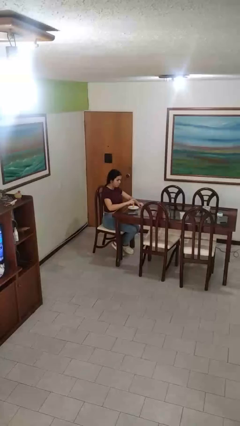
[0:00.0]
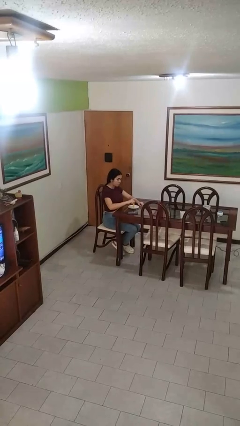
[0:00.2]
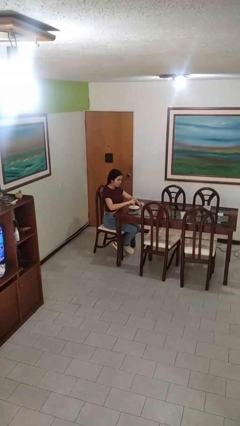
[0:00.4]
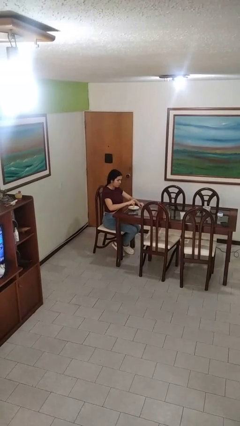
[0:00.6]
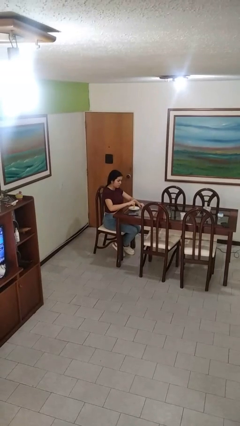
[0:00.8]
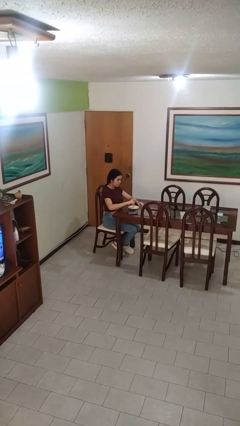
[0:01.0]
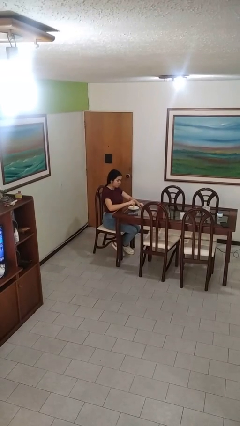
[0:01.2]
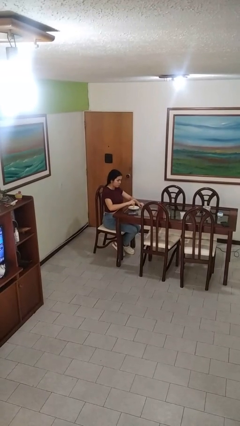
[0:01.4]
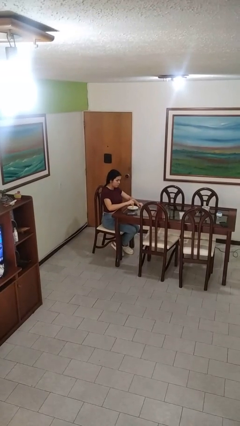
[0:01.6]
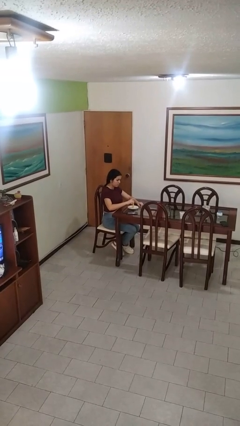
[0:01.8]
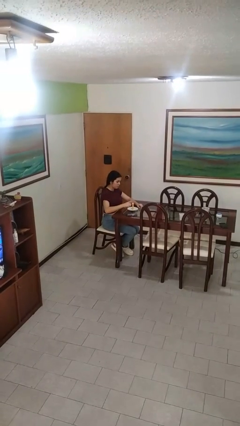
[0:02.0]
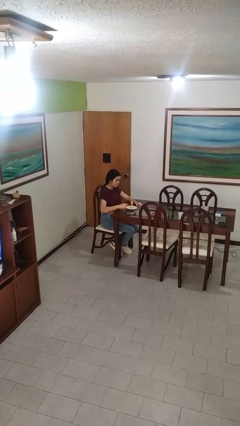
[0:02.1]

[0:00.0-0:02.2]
person lights candle

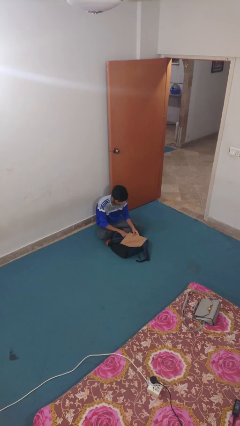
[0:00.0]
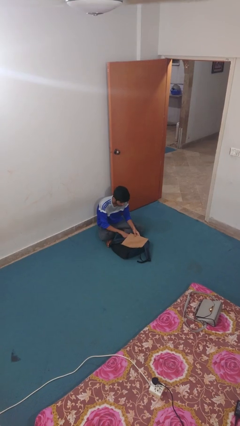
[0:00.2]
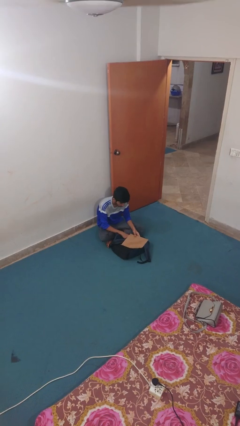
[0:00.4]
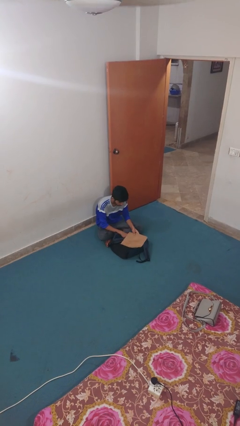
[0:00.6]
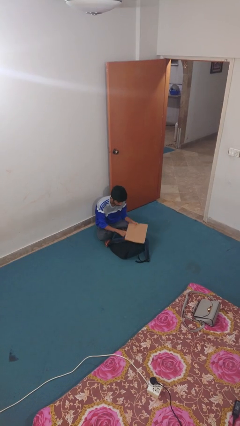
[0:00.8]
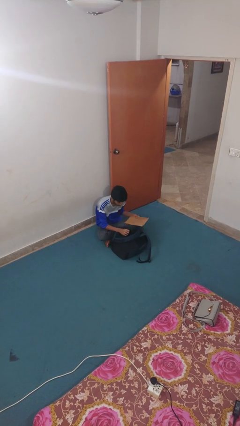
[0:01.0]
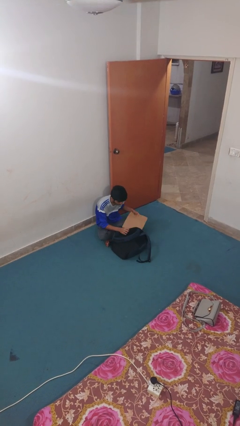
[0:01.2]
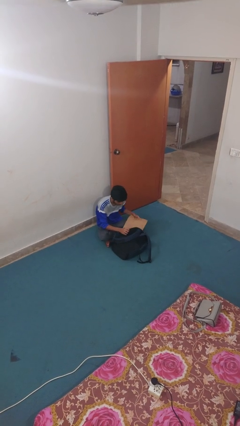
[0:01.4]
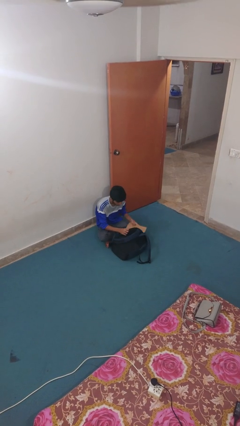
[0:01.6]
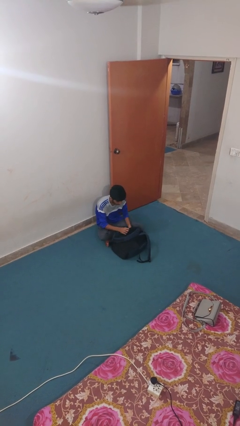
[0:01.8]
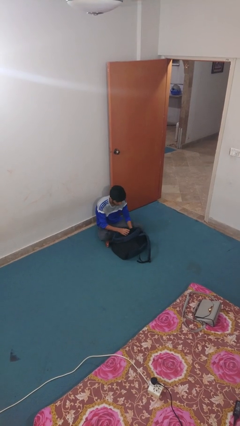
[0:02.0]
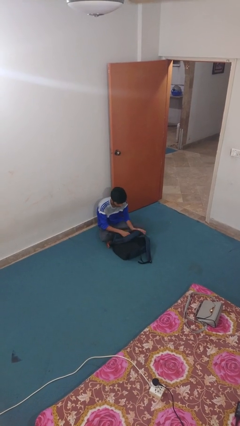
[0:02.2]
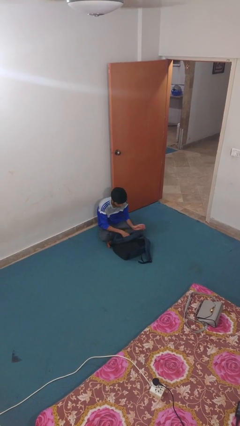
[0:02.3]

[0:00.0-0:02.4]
person puts object into backpack

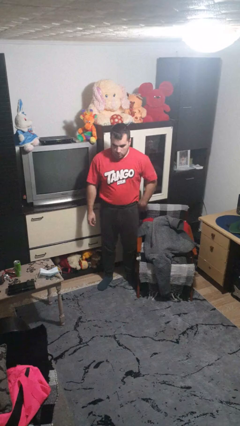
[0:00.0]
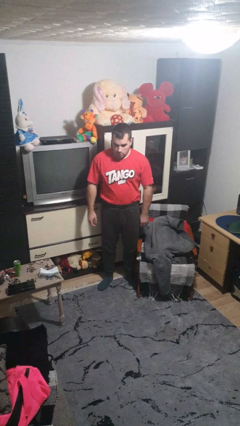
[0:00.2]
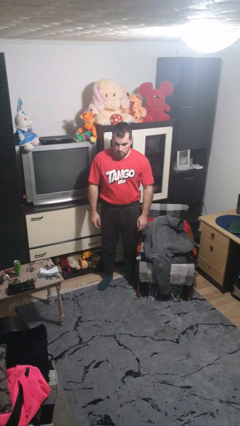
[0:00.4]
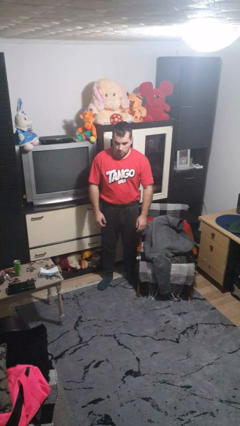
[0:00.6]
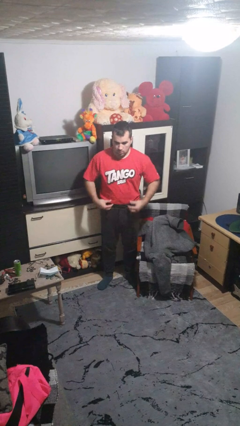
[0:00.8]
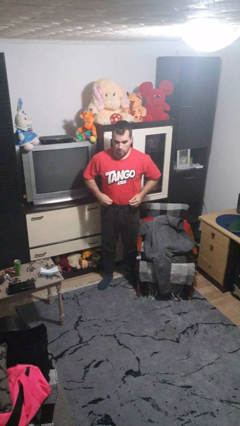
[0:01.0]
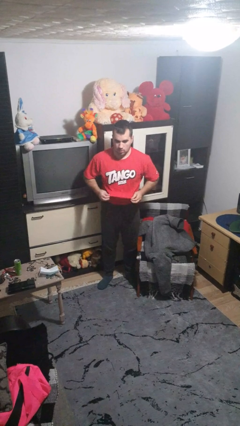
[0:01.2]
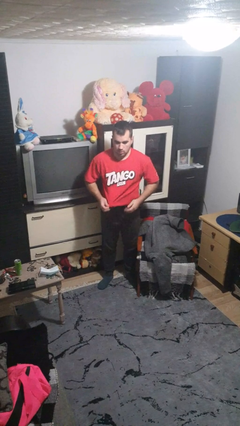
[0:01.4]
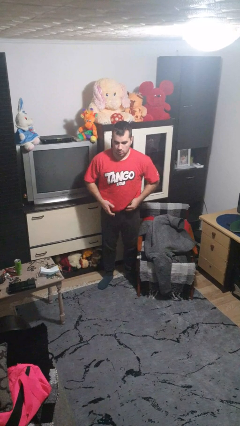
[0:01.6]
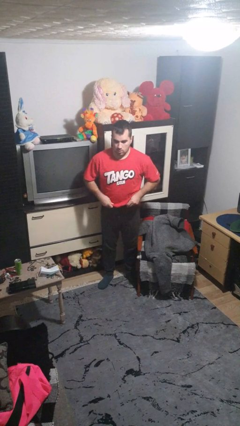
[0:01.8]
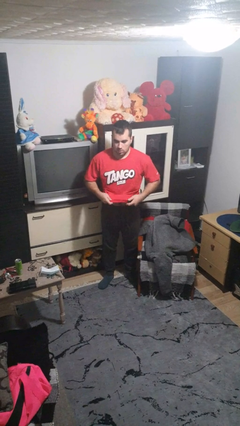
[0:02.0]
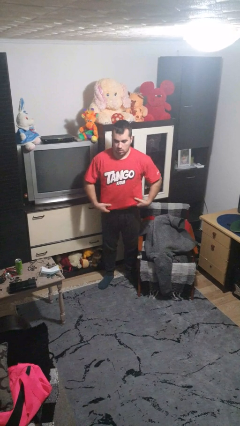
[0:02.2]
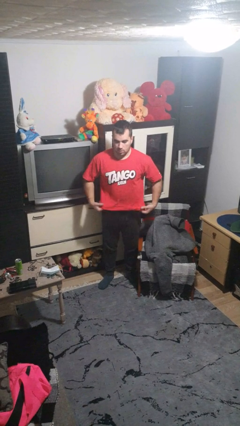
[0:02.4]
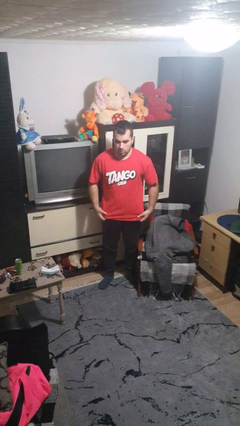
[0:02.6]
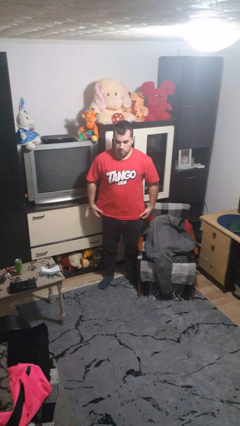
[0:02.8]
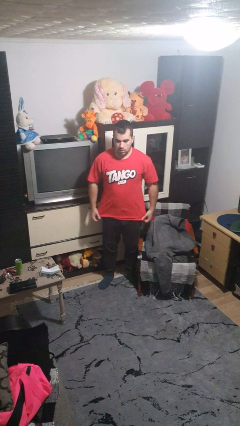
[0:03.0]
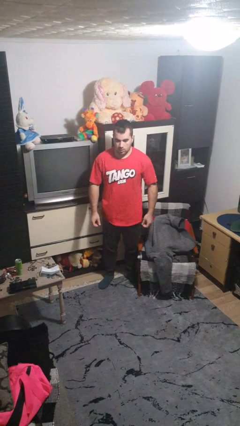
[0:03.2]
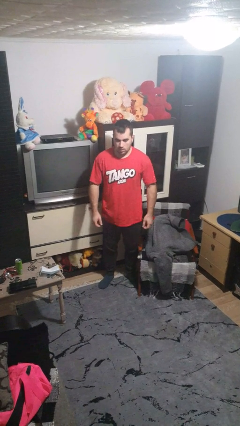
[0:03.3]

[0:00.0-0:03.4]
person untucks shirt

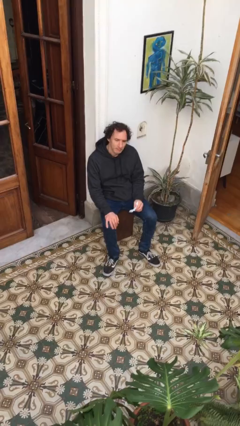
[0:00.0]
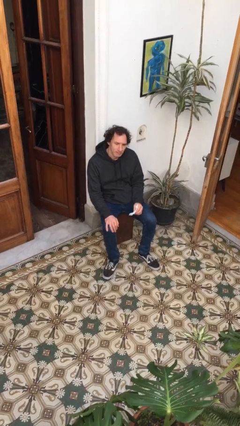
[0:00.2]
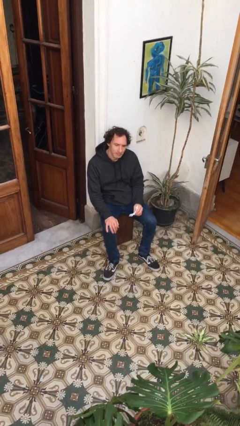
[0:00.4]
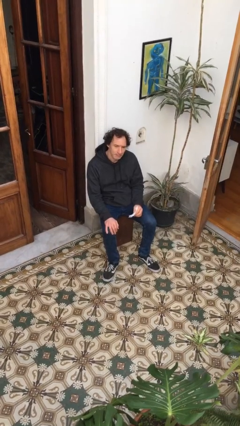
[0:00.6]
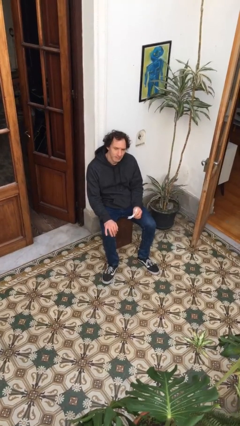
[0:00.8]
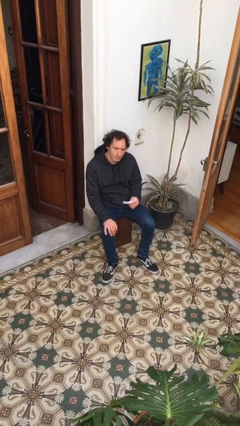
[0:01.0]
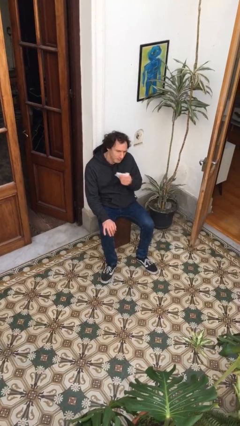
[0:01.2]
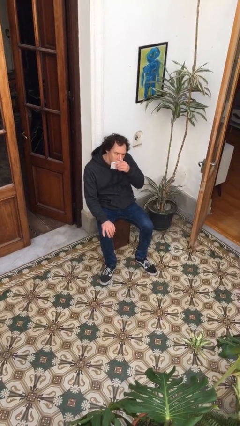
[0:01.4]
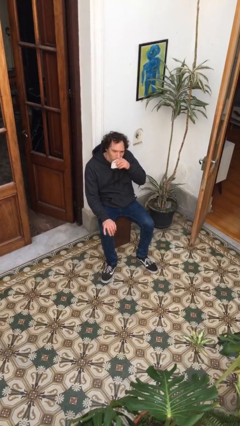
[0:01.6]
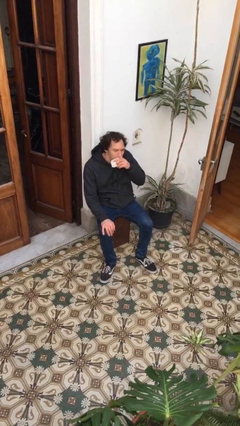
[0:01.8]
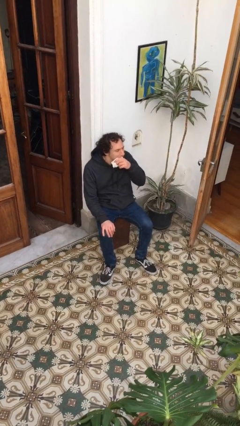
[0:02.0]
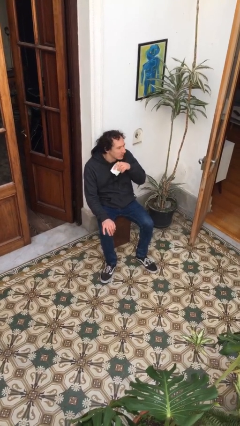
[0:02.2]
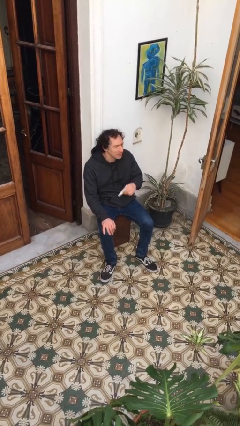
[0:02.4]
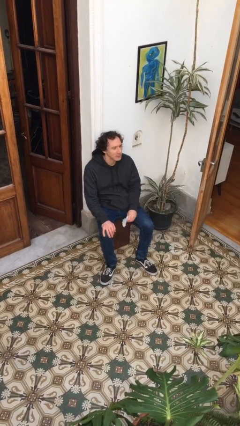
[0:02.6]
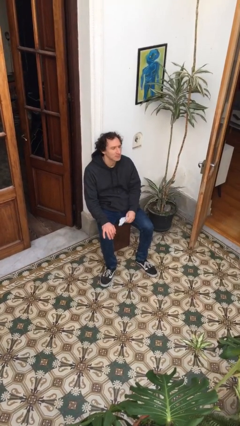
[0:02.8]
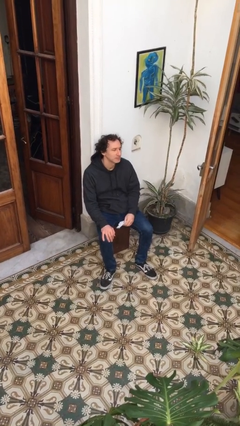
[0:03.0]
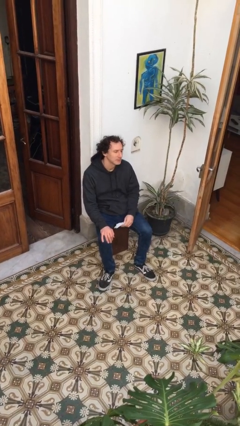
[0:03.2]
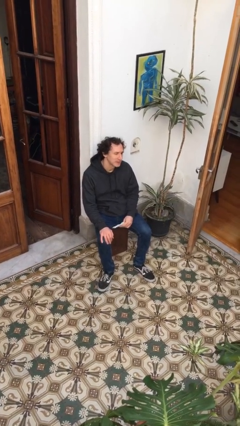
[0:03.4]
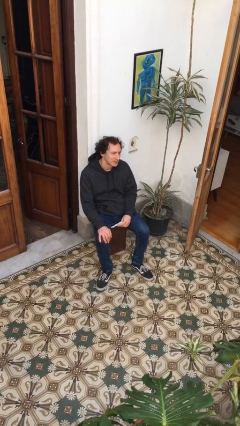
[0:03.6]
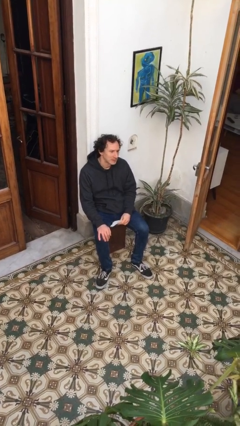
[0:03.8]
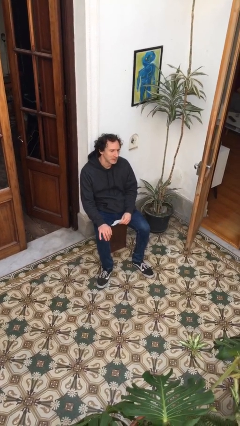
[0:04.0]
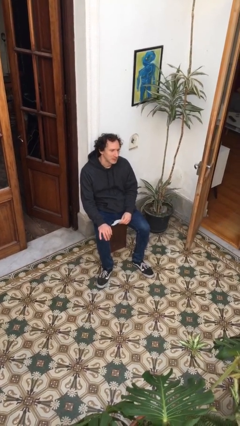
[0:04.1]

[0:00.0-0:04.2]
person wipes mouth with napkin

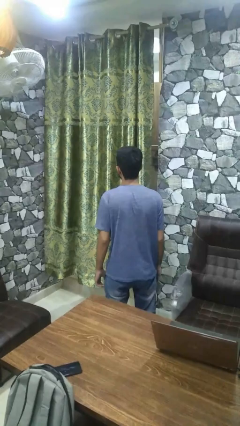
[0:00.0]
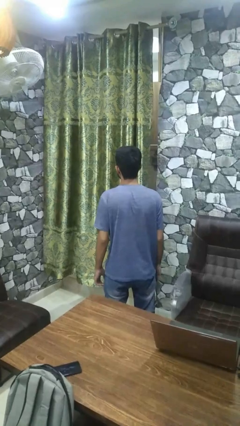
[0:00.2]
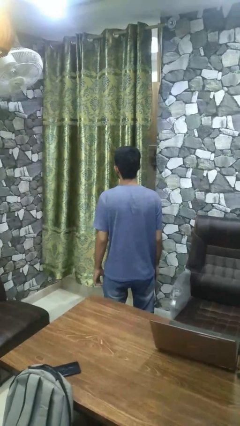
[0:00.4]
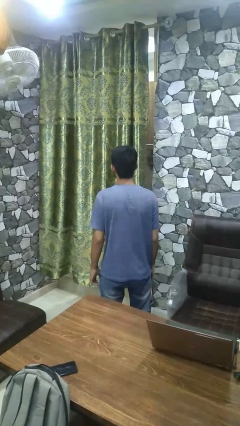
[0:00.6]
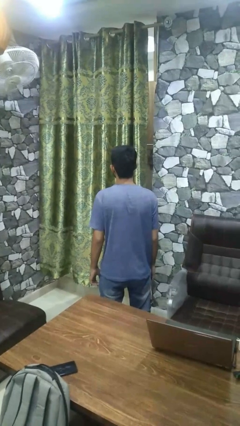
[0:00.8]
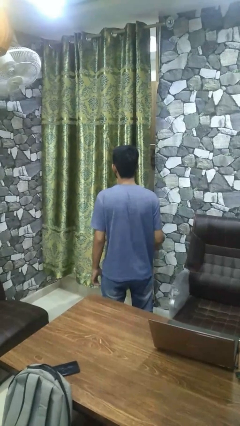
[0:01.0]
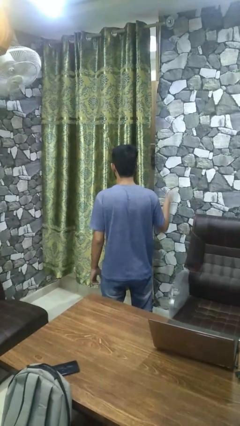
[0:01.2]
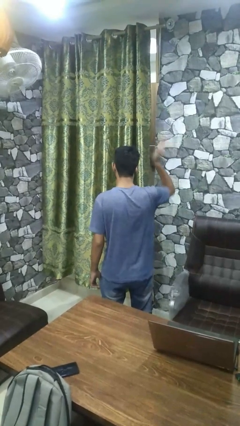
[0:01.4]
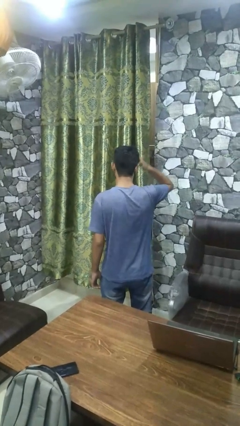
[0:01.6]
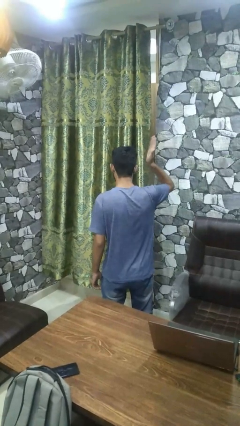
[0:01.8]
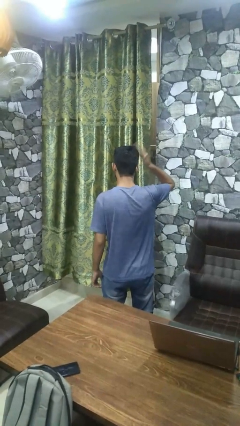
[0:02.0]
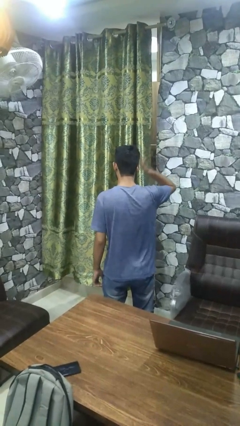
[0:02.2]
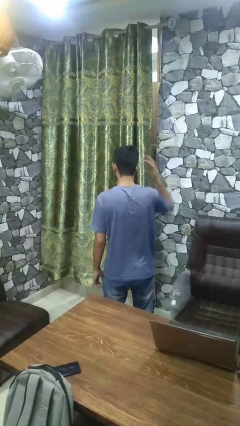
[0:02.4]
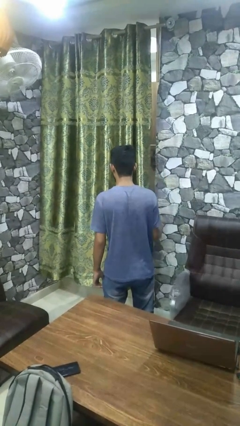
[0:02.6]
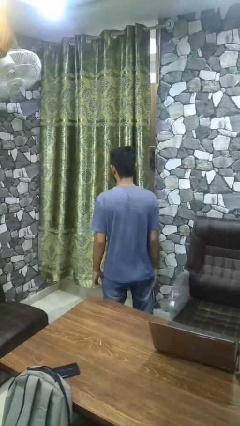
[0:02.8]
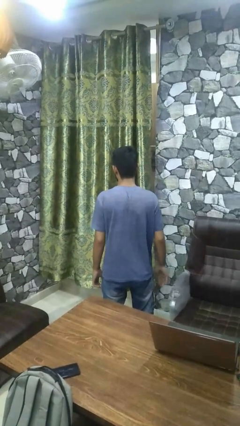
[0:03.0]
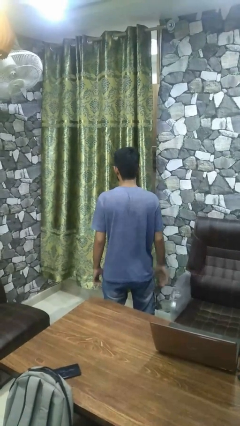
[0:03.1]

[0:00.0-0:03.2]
person pats head

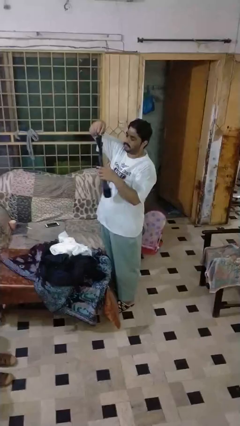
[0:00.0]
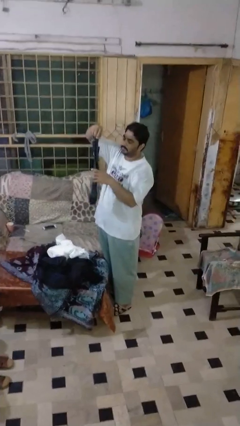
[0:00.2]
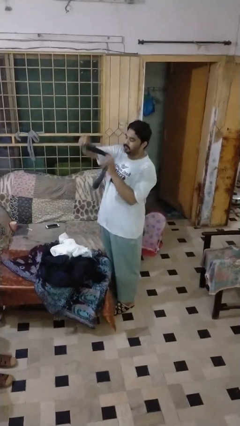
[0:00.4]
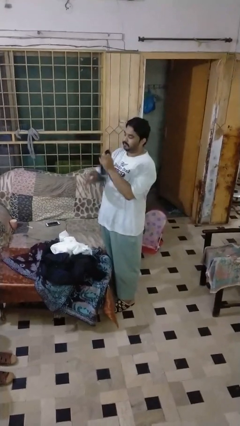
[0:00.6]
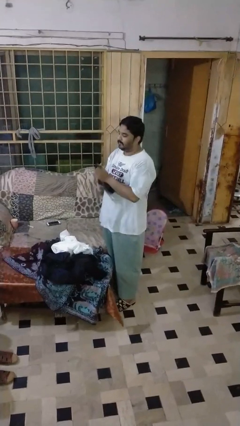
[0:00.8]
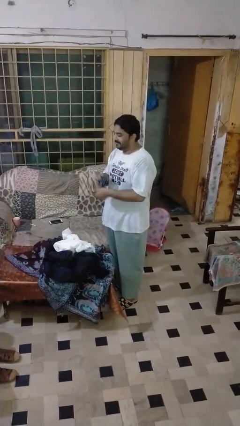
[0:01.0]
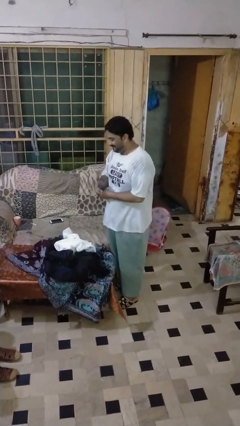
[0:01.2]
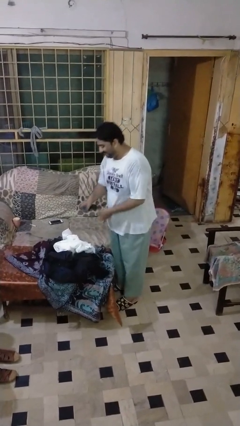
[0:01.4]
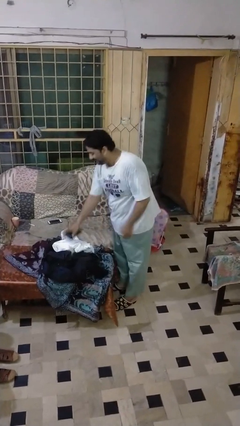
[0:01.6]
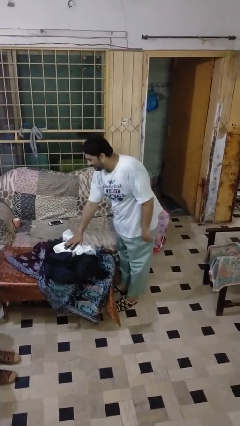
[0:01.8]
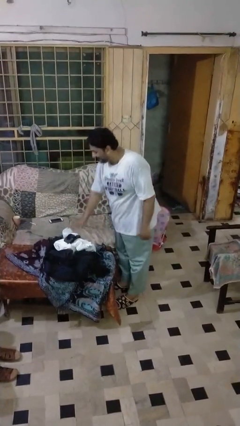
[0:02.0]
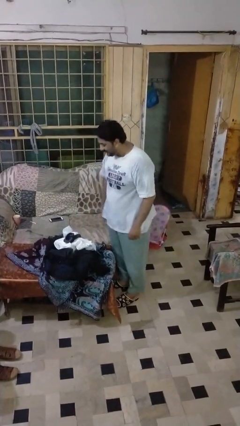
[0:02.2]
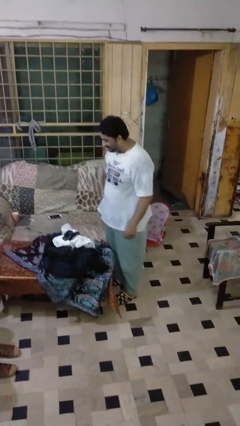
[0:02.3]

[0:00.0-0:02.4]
person folds socks
